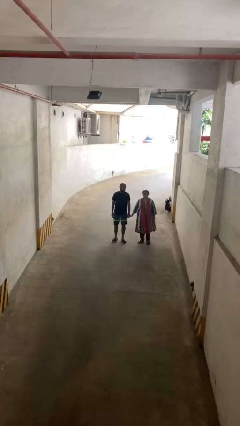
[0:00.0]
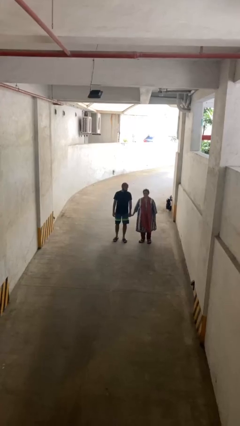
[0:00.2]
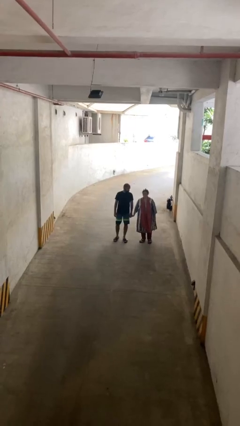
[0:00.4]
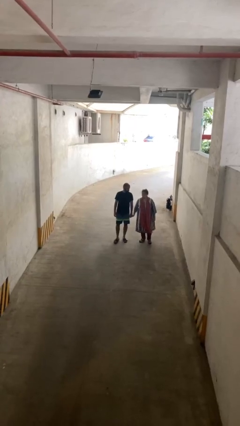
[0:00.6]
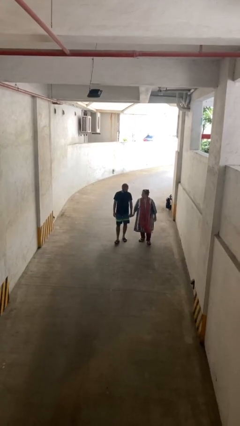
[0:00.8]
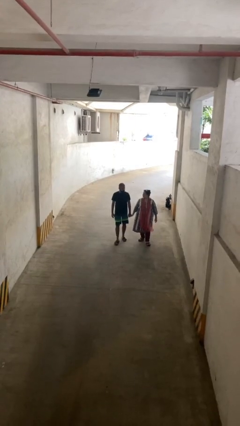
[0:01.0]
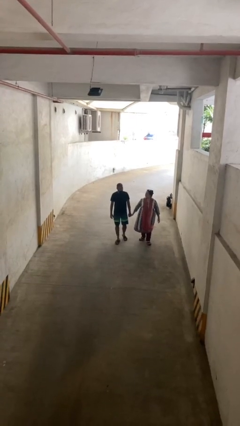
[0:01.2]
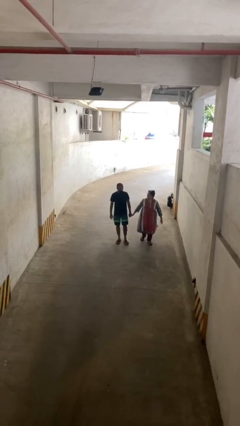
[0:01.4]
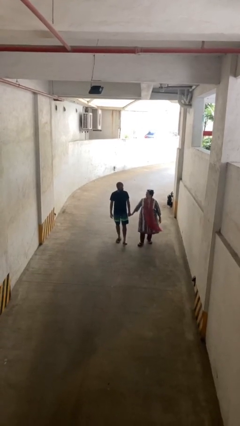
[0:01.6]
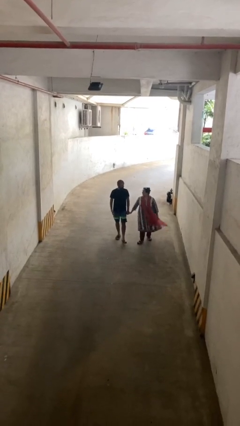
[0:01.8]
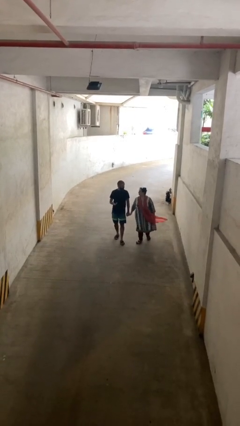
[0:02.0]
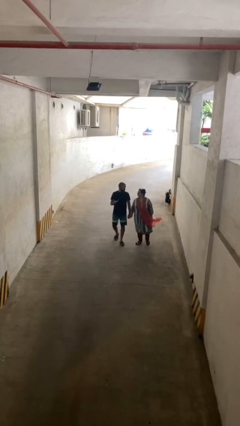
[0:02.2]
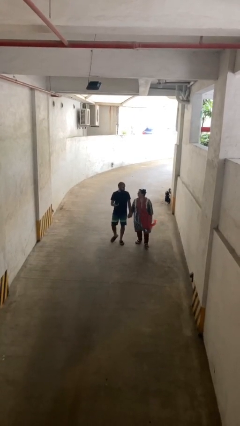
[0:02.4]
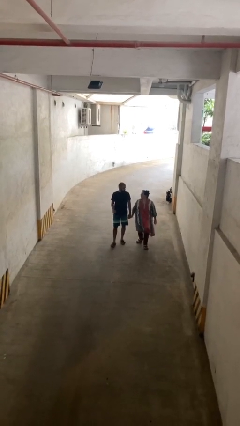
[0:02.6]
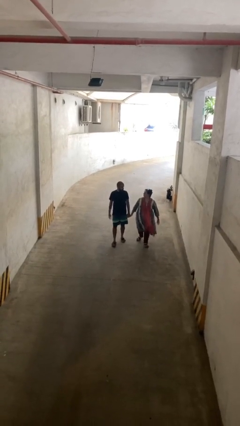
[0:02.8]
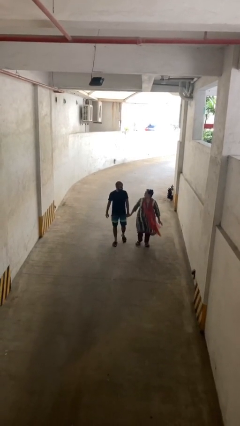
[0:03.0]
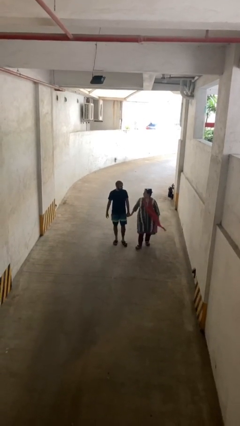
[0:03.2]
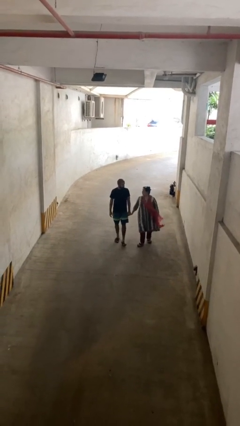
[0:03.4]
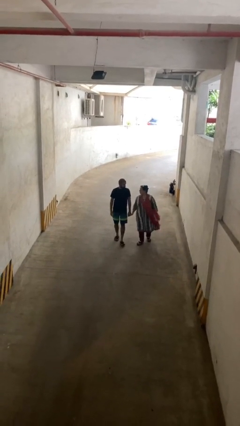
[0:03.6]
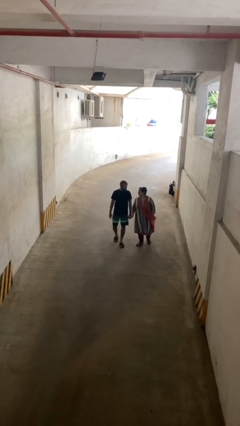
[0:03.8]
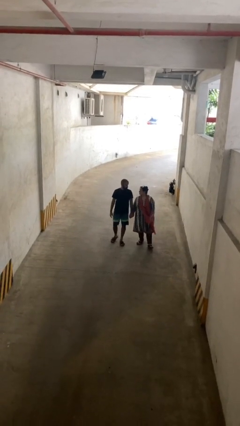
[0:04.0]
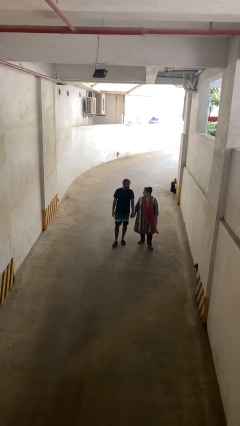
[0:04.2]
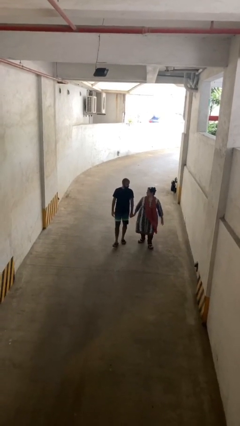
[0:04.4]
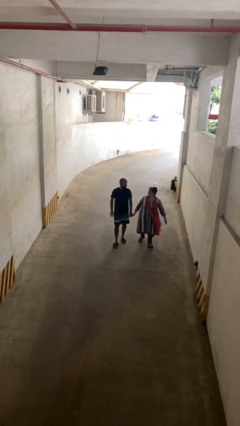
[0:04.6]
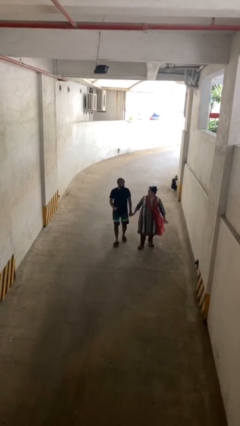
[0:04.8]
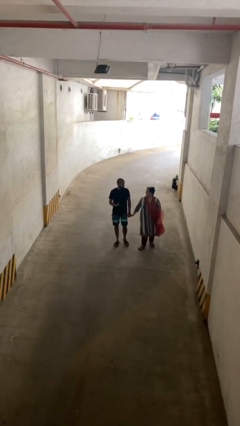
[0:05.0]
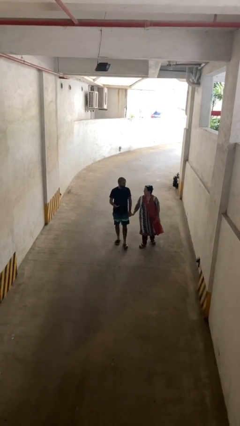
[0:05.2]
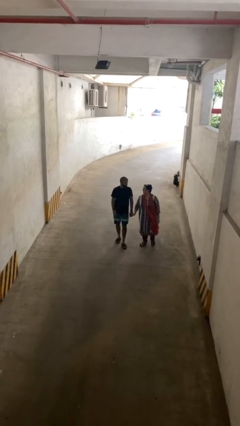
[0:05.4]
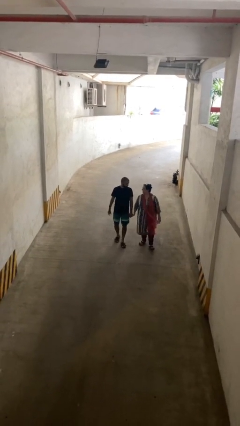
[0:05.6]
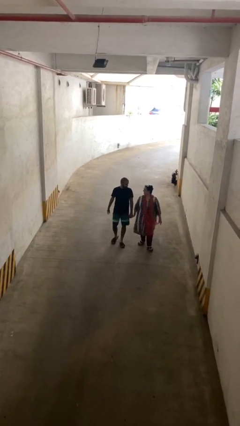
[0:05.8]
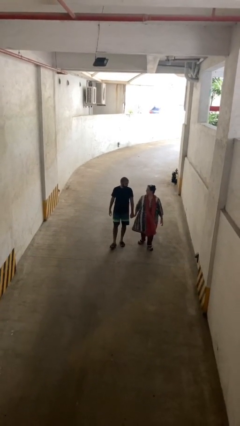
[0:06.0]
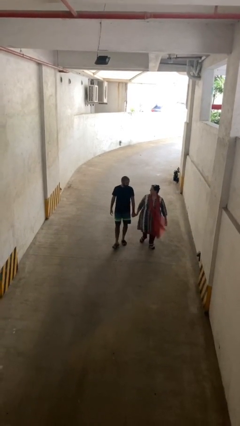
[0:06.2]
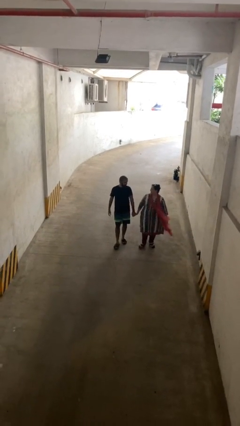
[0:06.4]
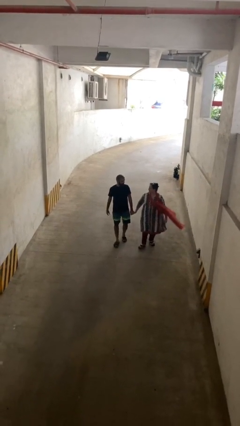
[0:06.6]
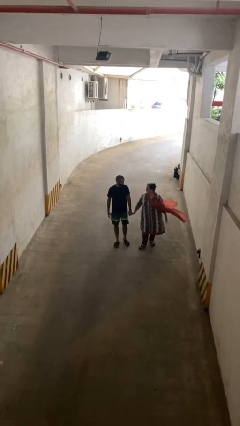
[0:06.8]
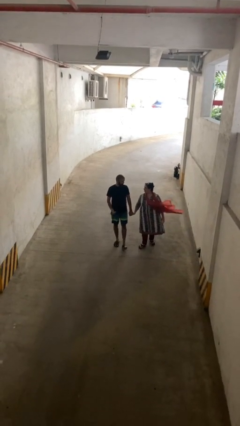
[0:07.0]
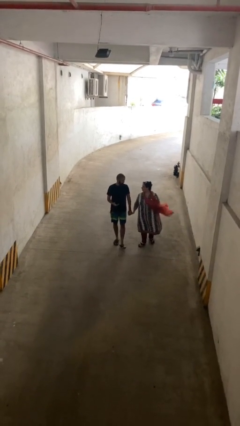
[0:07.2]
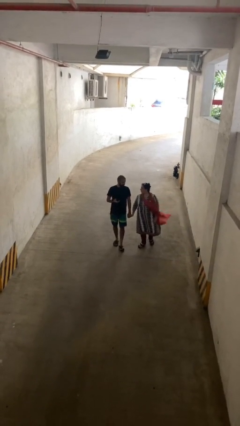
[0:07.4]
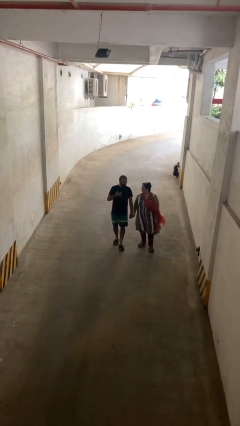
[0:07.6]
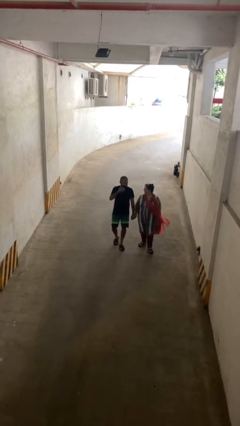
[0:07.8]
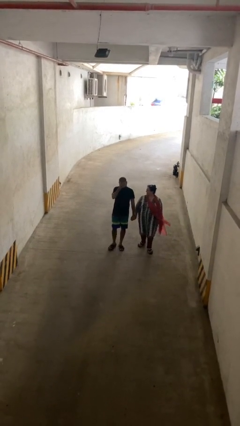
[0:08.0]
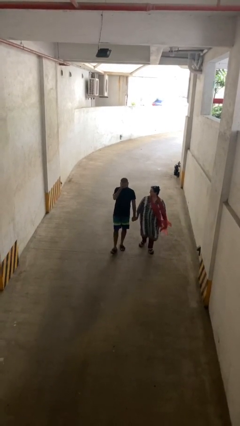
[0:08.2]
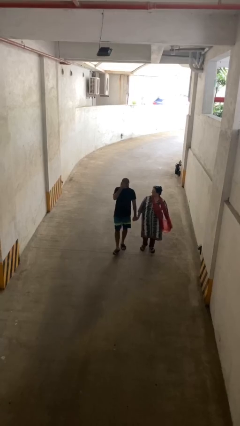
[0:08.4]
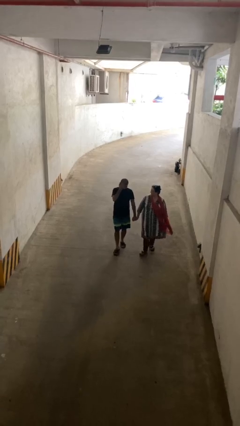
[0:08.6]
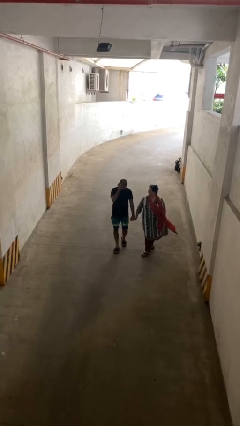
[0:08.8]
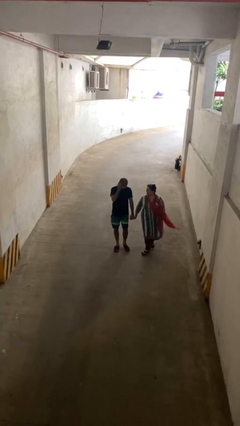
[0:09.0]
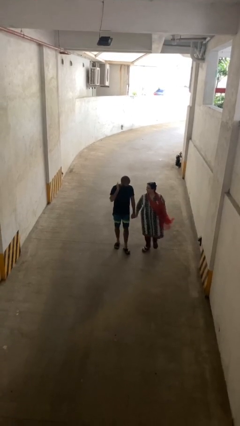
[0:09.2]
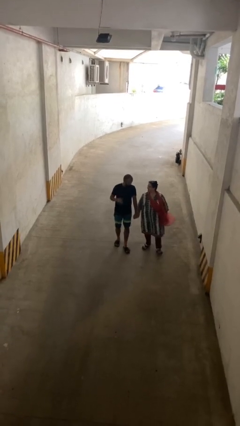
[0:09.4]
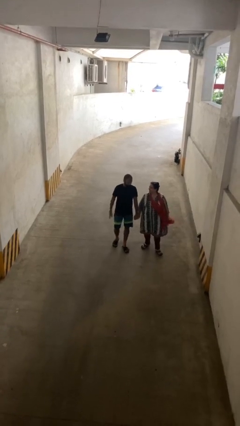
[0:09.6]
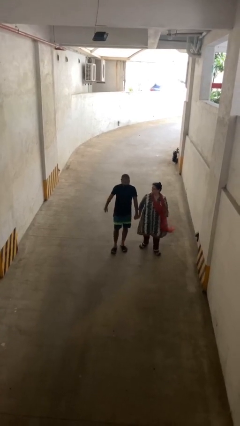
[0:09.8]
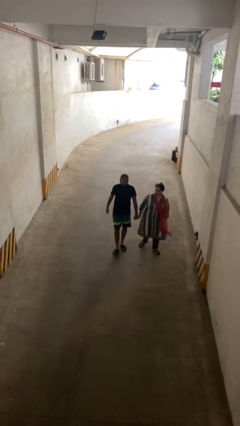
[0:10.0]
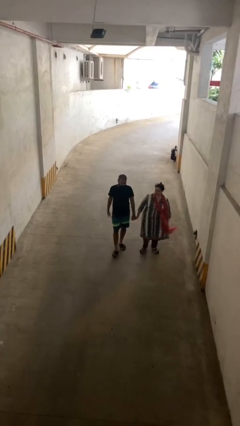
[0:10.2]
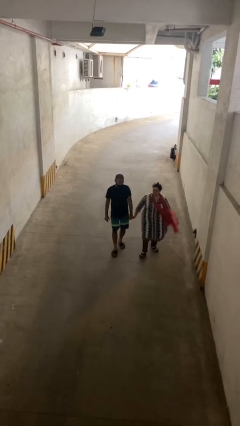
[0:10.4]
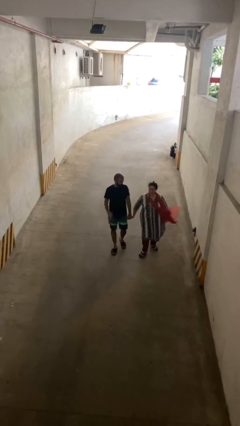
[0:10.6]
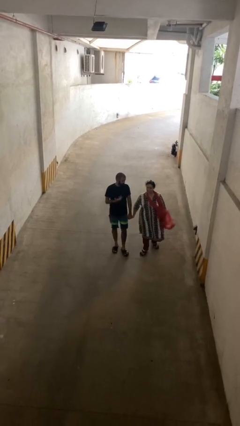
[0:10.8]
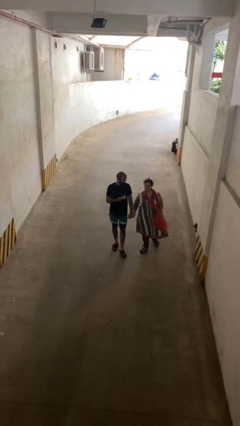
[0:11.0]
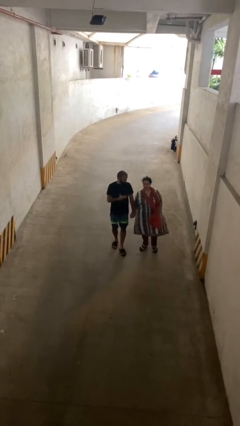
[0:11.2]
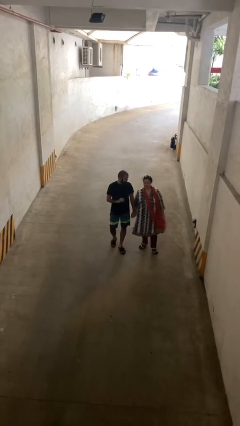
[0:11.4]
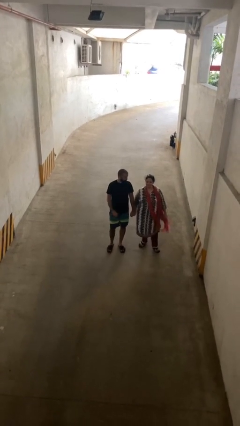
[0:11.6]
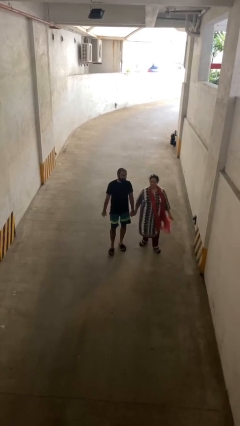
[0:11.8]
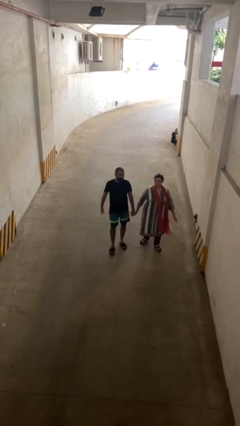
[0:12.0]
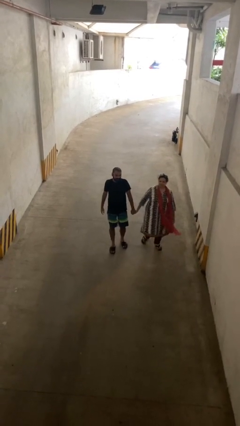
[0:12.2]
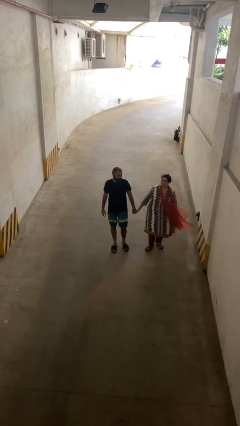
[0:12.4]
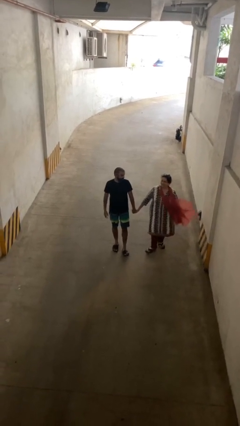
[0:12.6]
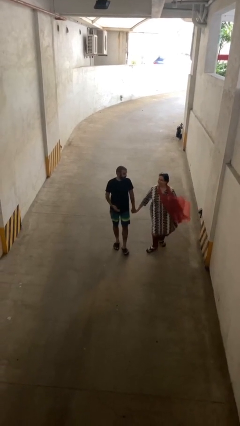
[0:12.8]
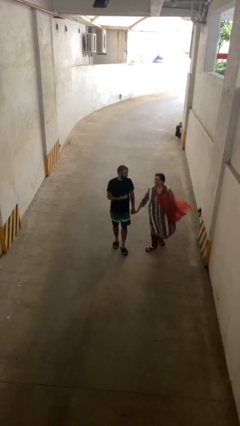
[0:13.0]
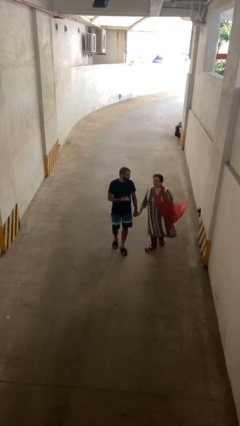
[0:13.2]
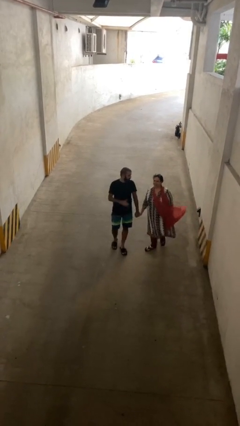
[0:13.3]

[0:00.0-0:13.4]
person holds hand

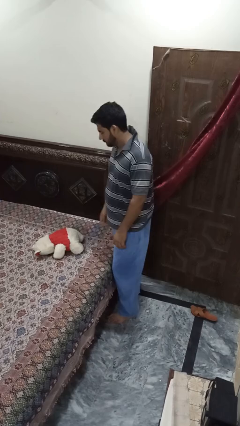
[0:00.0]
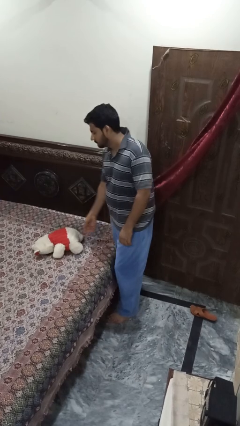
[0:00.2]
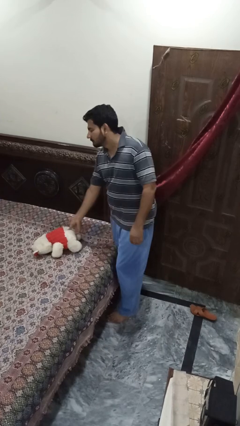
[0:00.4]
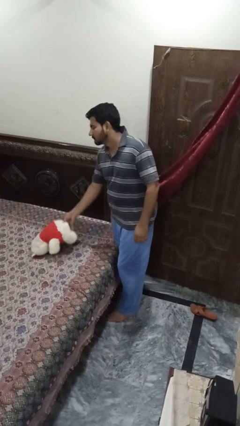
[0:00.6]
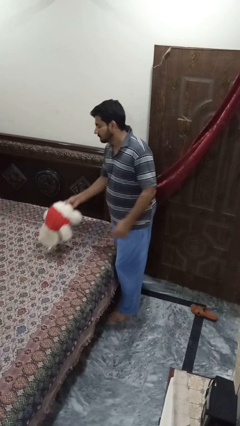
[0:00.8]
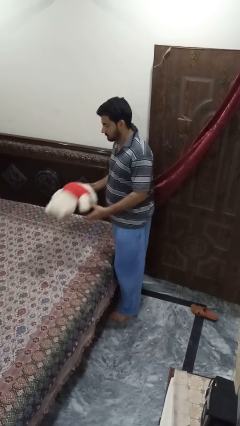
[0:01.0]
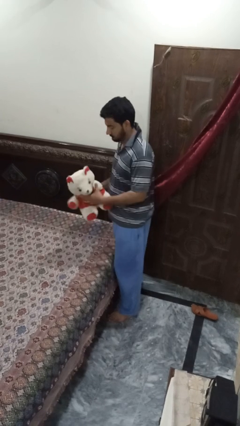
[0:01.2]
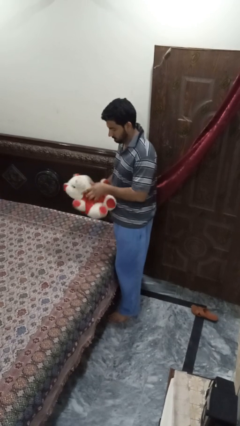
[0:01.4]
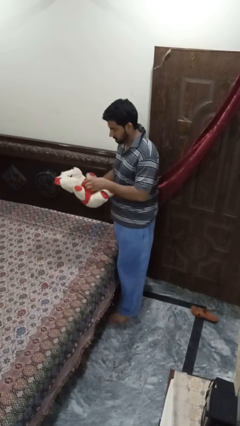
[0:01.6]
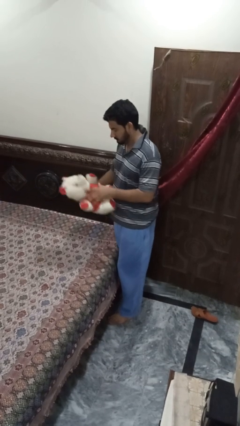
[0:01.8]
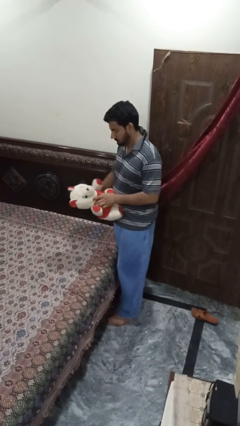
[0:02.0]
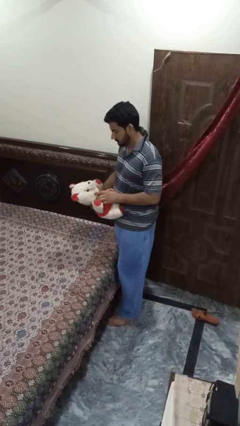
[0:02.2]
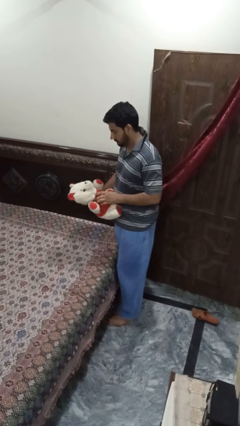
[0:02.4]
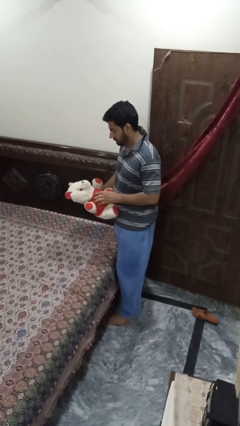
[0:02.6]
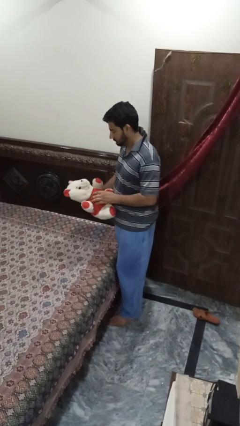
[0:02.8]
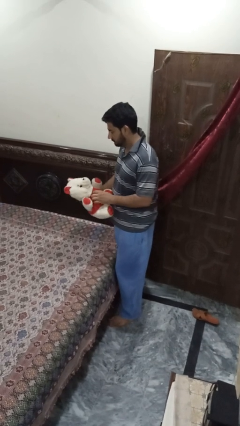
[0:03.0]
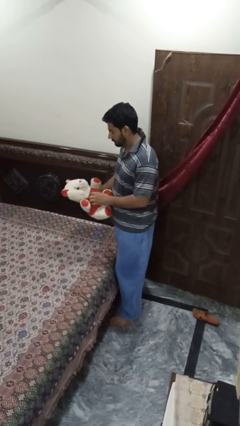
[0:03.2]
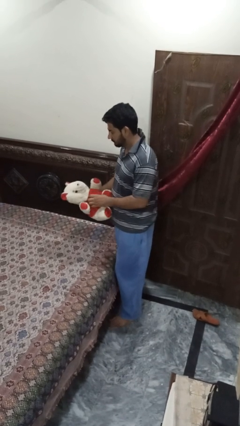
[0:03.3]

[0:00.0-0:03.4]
person picks up object from bed

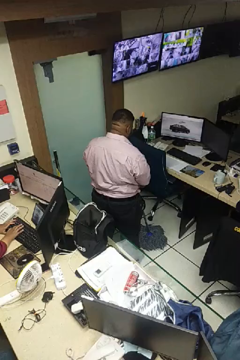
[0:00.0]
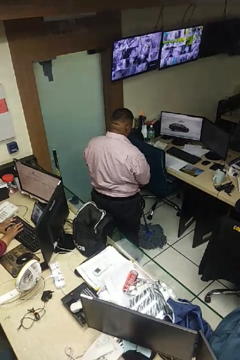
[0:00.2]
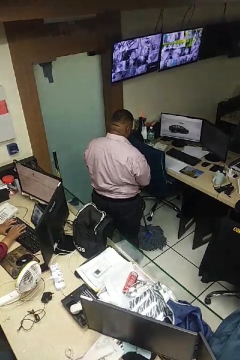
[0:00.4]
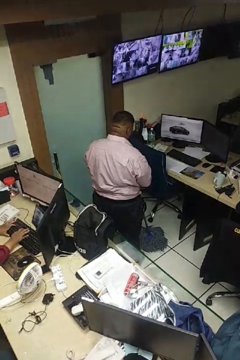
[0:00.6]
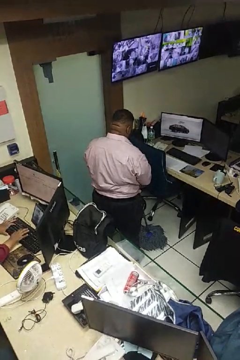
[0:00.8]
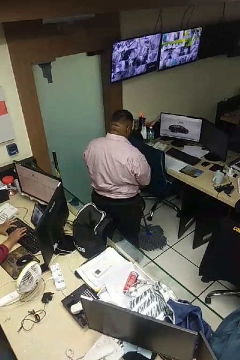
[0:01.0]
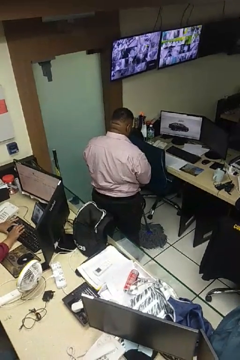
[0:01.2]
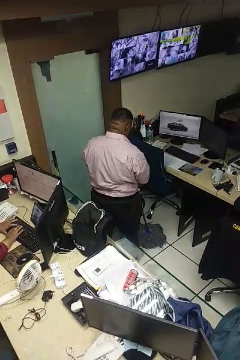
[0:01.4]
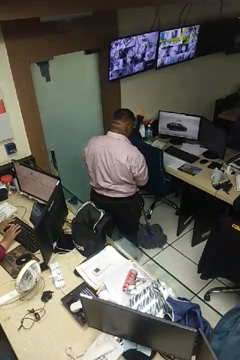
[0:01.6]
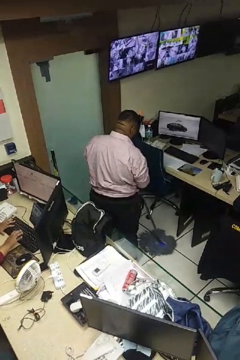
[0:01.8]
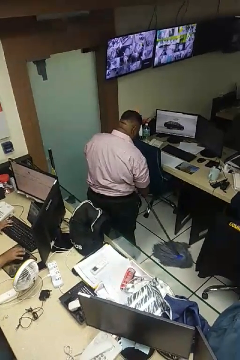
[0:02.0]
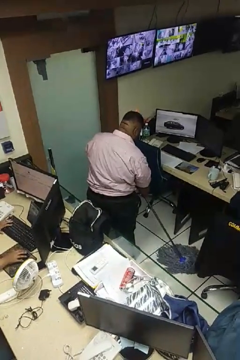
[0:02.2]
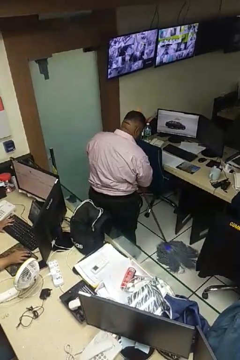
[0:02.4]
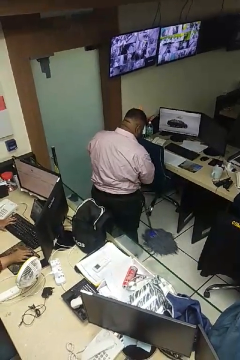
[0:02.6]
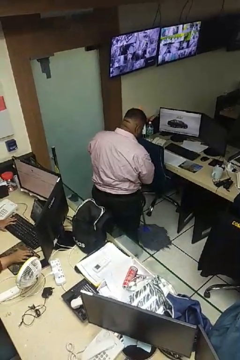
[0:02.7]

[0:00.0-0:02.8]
person mops
